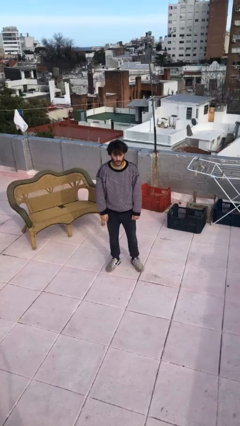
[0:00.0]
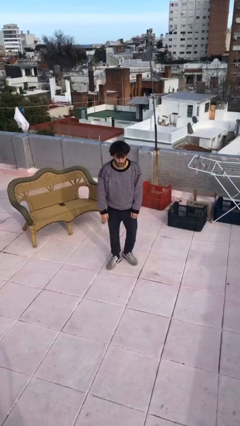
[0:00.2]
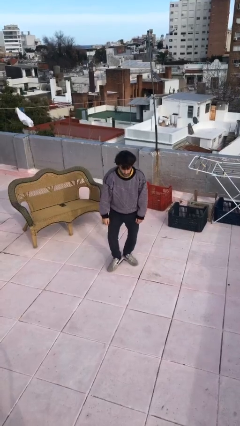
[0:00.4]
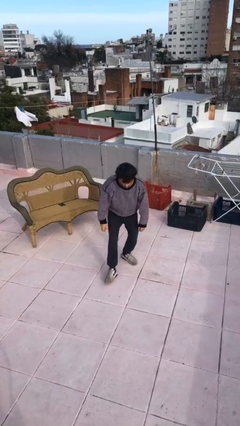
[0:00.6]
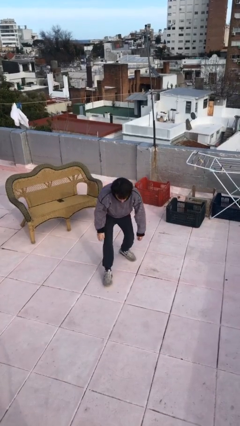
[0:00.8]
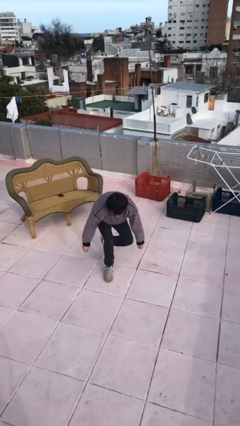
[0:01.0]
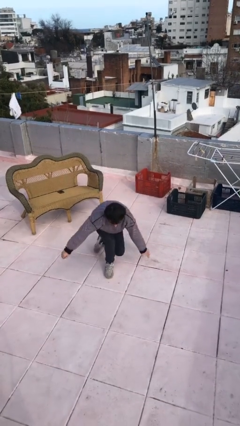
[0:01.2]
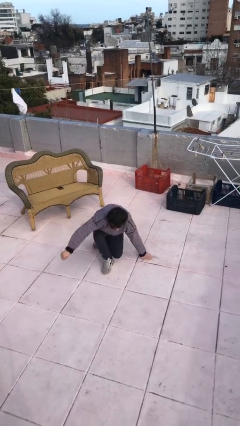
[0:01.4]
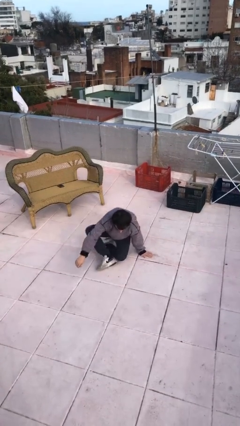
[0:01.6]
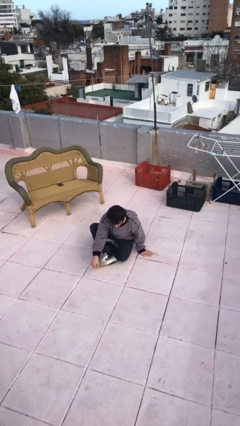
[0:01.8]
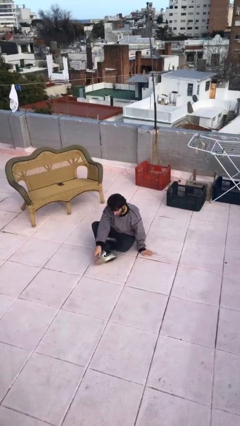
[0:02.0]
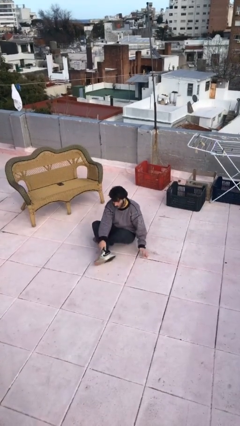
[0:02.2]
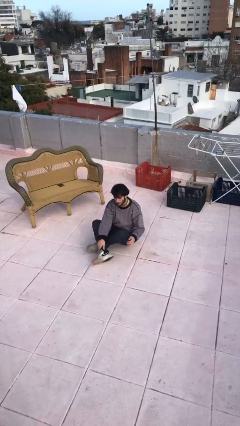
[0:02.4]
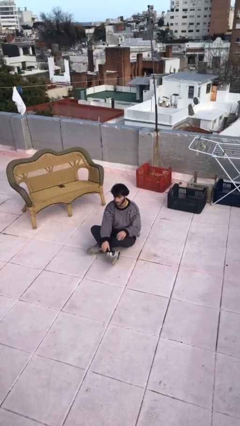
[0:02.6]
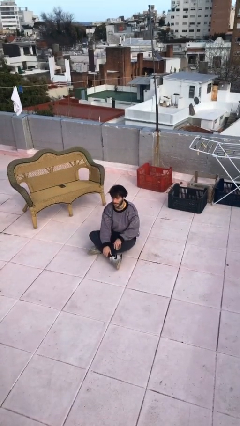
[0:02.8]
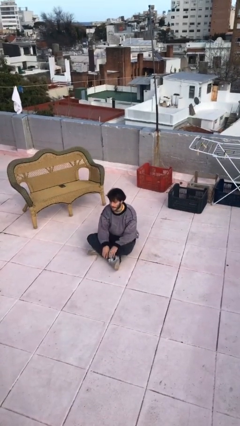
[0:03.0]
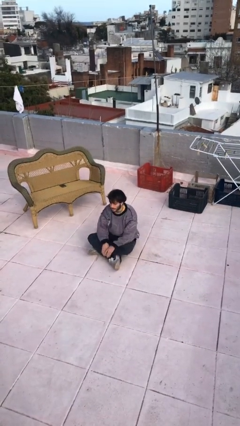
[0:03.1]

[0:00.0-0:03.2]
person sits crisscross

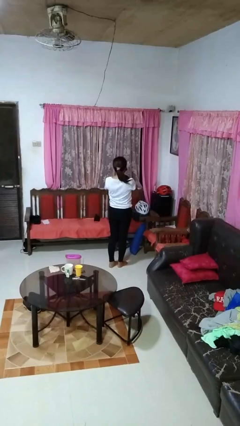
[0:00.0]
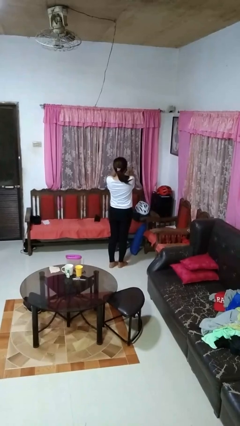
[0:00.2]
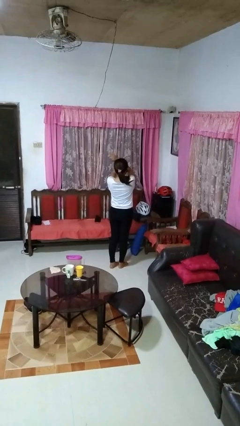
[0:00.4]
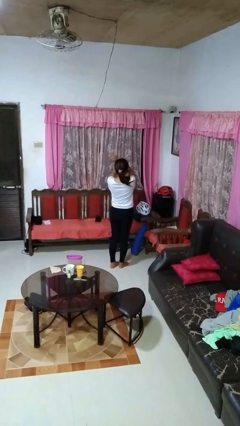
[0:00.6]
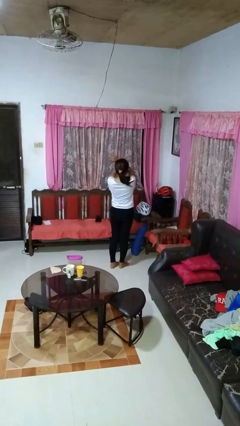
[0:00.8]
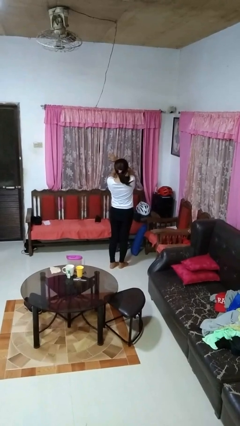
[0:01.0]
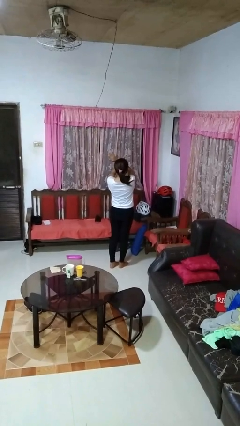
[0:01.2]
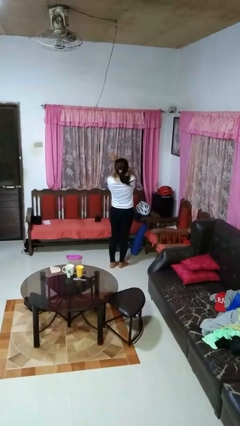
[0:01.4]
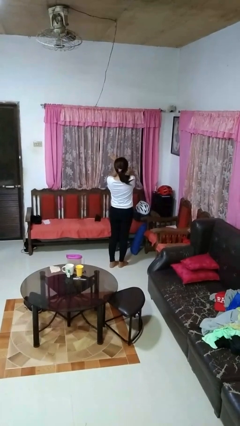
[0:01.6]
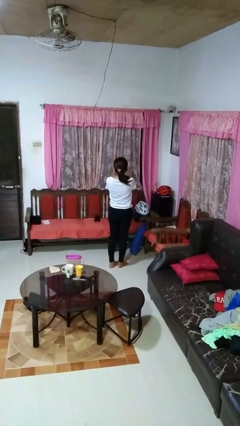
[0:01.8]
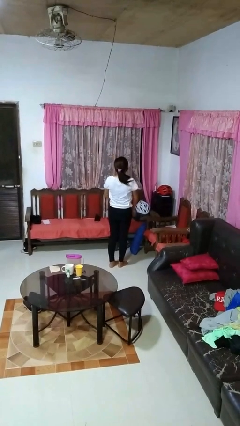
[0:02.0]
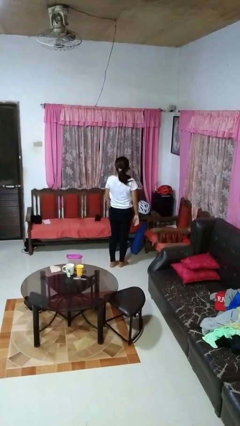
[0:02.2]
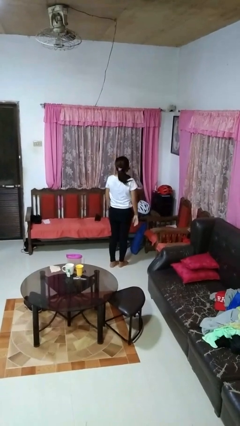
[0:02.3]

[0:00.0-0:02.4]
person gestures arms x

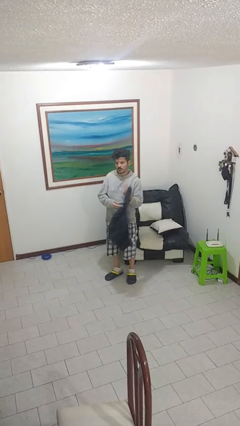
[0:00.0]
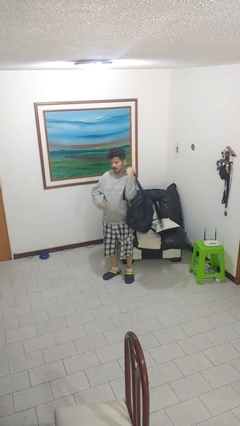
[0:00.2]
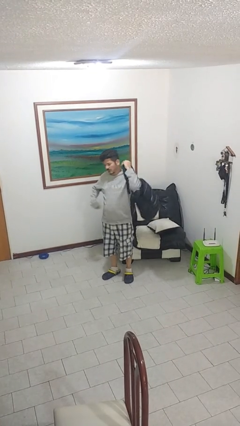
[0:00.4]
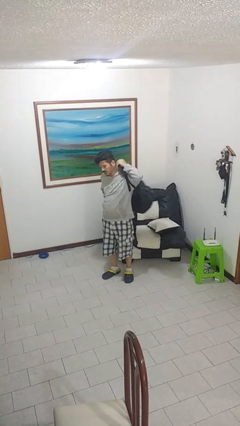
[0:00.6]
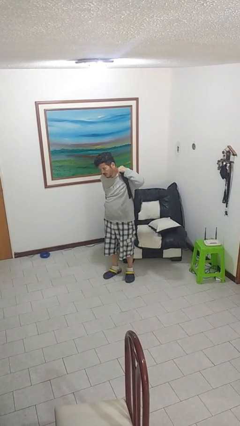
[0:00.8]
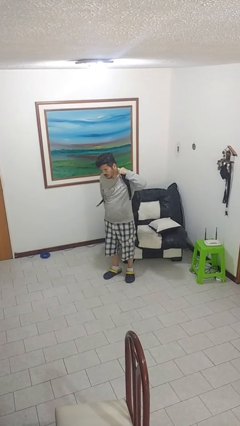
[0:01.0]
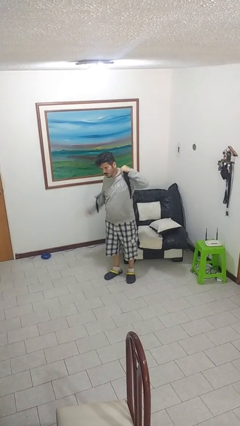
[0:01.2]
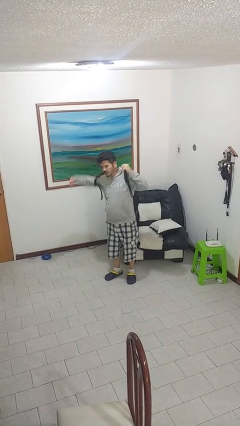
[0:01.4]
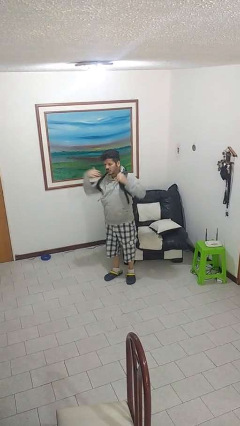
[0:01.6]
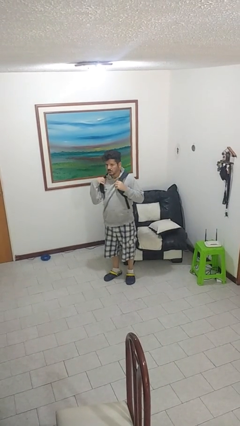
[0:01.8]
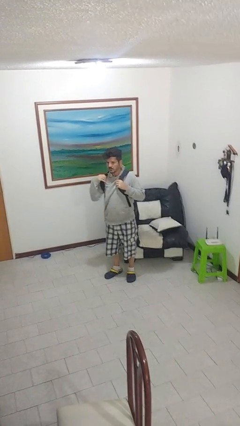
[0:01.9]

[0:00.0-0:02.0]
person puts on backpack

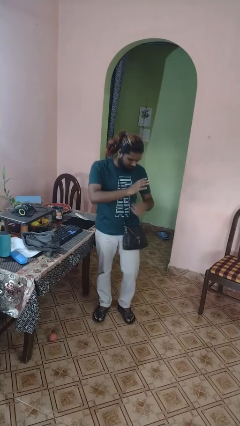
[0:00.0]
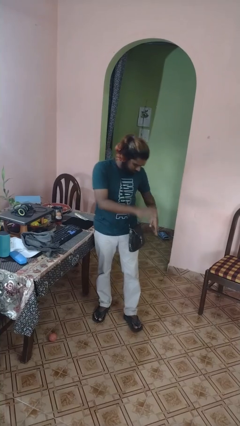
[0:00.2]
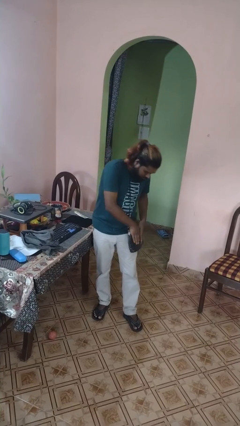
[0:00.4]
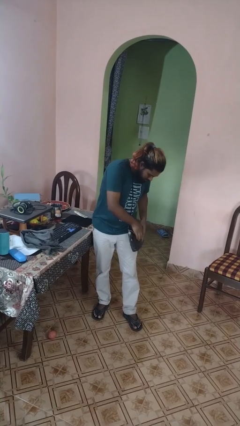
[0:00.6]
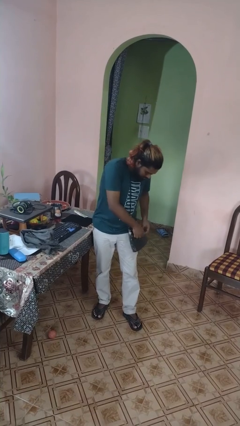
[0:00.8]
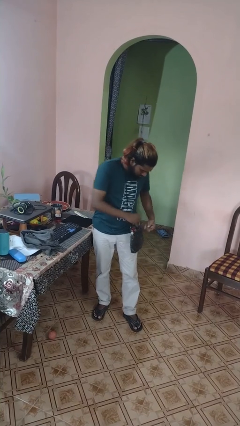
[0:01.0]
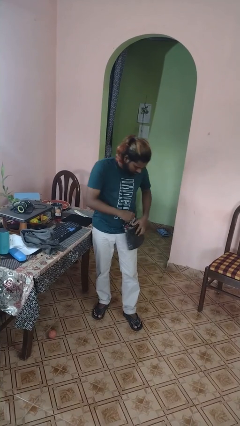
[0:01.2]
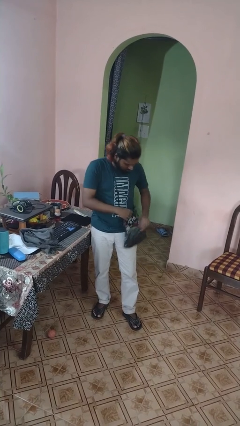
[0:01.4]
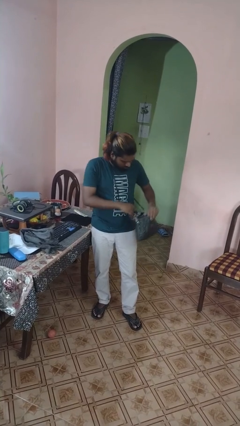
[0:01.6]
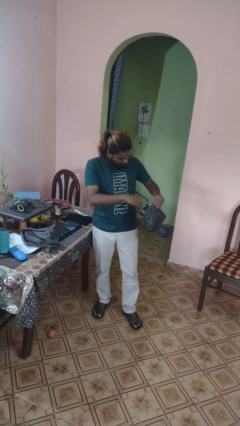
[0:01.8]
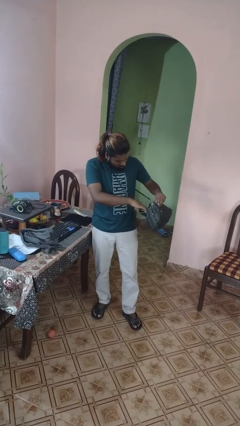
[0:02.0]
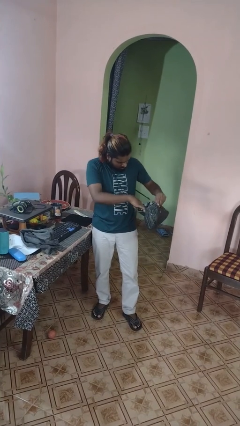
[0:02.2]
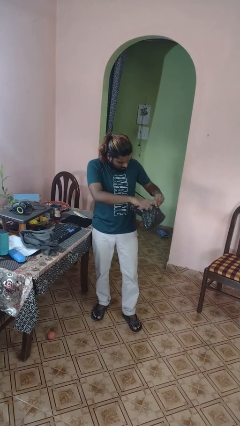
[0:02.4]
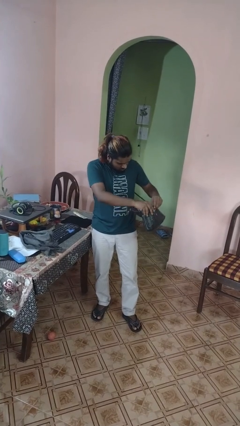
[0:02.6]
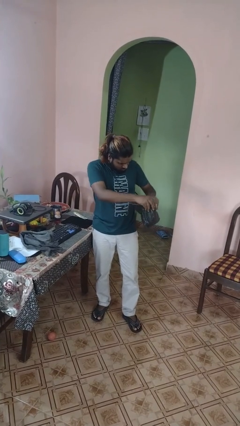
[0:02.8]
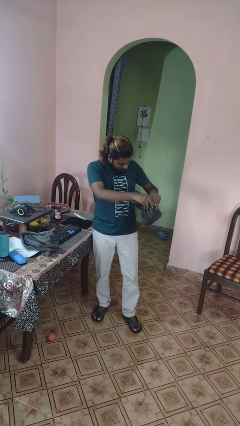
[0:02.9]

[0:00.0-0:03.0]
person searches in purse

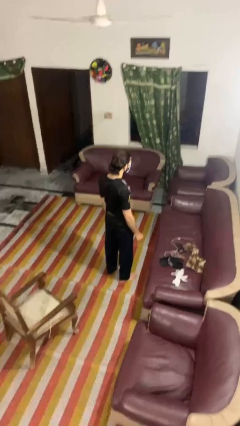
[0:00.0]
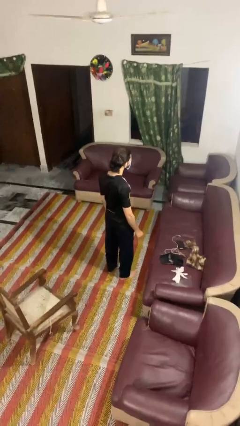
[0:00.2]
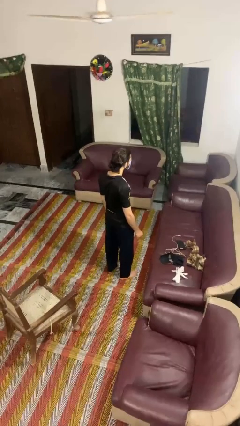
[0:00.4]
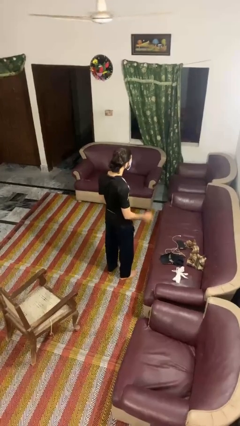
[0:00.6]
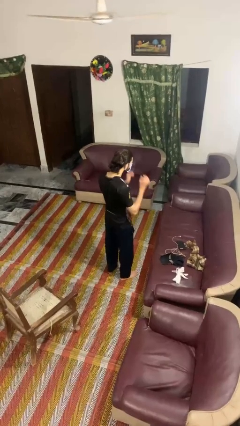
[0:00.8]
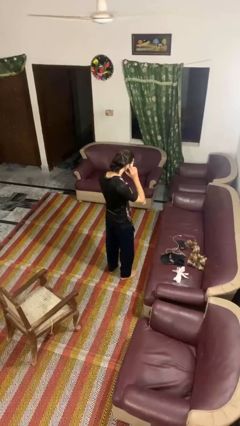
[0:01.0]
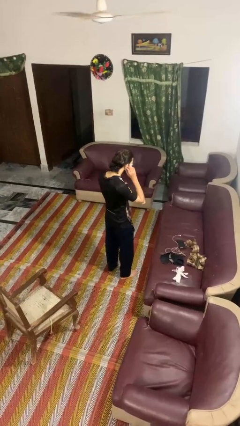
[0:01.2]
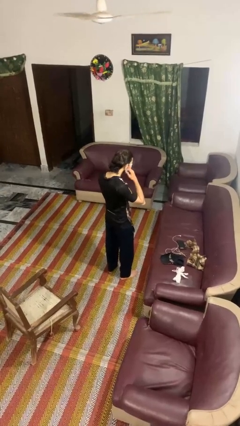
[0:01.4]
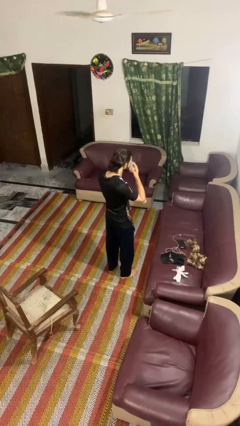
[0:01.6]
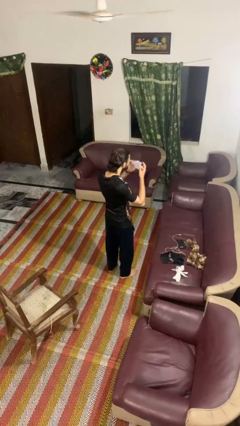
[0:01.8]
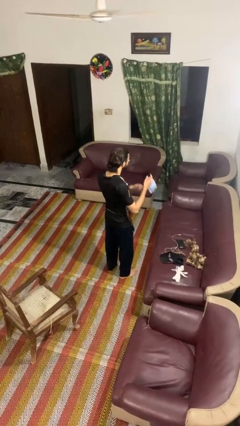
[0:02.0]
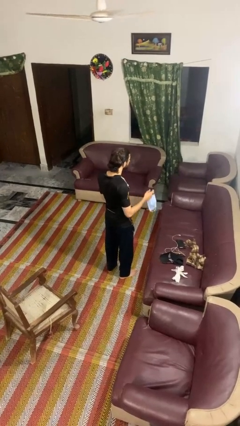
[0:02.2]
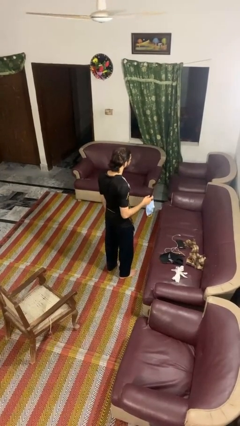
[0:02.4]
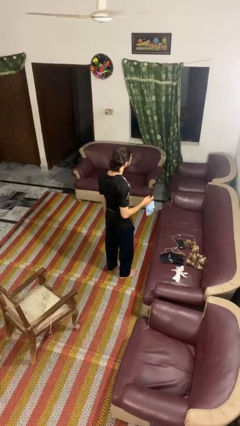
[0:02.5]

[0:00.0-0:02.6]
person takes off facemask

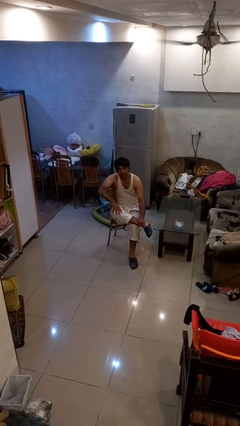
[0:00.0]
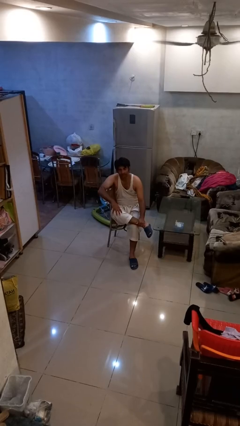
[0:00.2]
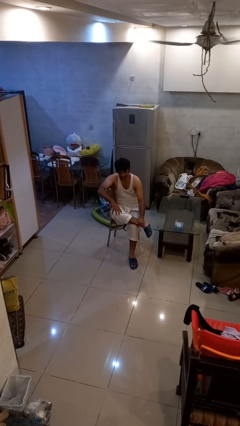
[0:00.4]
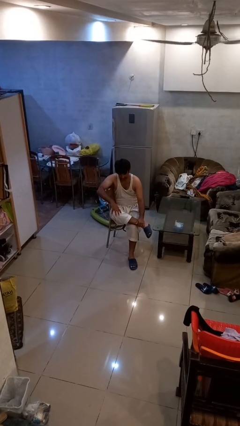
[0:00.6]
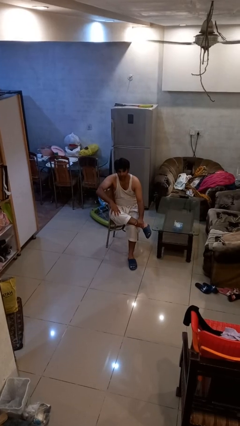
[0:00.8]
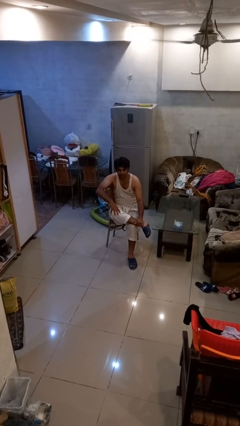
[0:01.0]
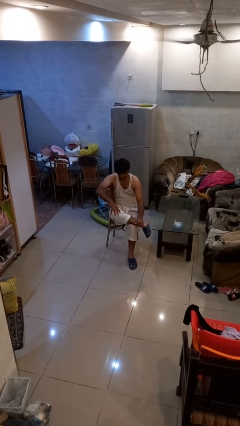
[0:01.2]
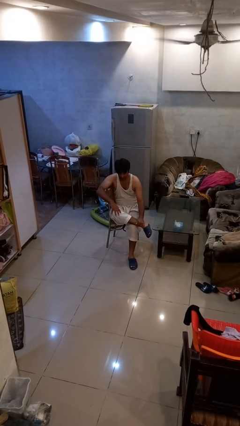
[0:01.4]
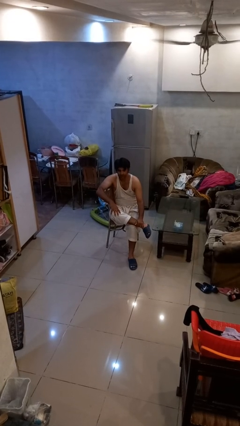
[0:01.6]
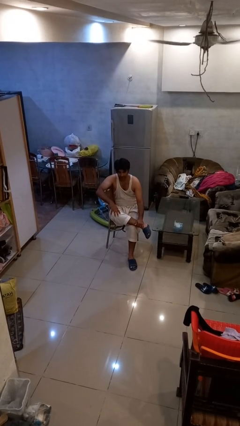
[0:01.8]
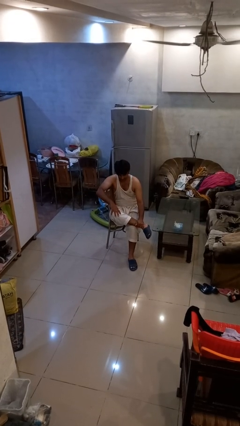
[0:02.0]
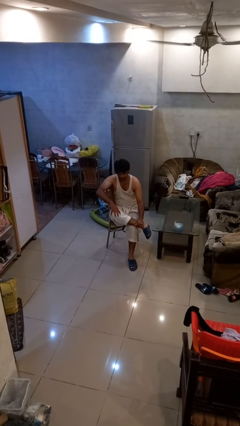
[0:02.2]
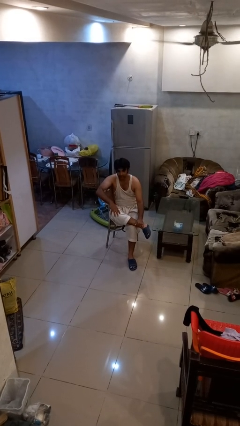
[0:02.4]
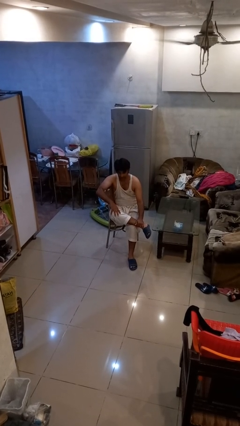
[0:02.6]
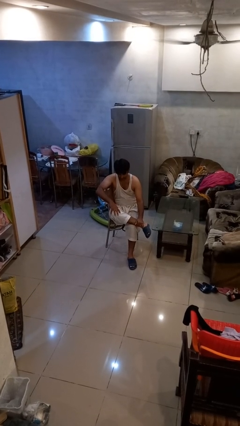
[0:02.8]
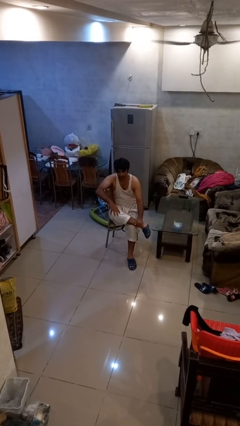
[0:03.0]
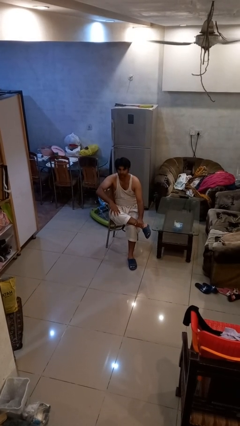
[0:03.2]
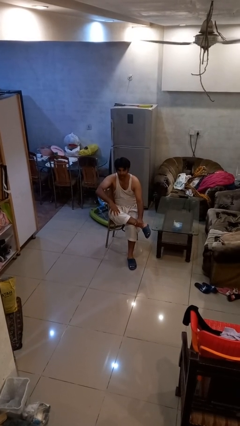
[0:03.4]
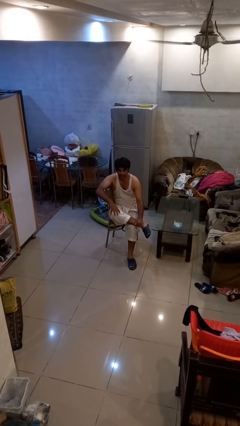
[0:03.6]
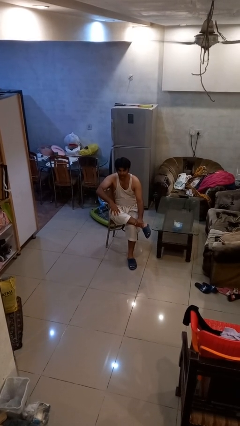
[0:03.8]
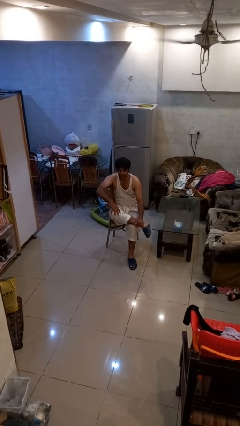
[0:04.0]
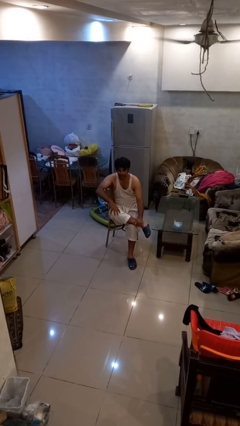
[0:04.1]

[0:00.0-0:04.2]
person nods head

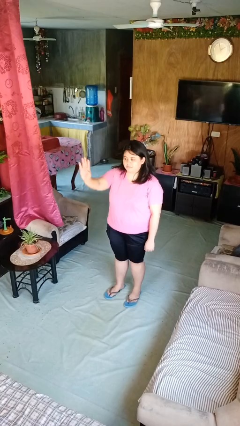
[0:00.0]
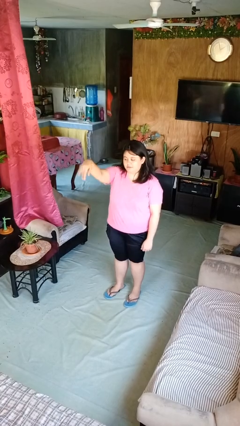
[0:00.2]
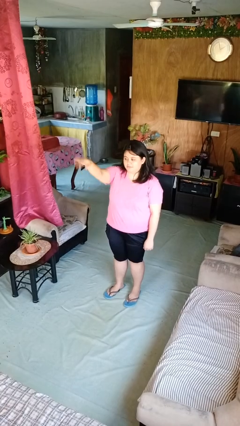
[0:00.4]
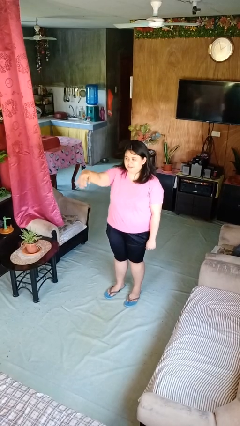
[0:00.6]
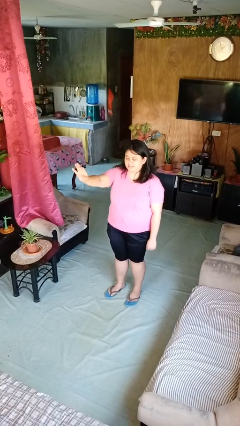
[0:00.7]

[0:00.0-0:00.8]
person gestures come here
